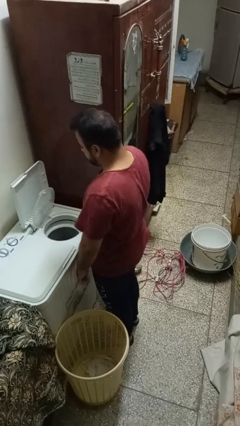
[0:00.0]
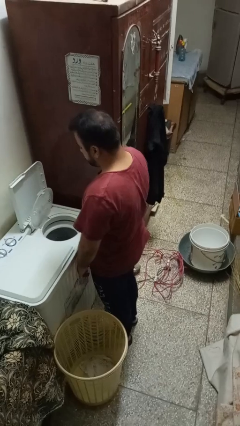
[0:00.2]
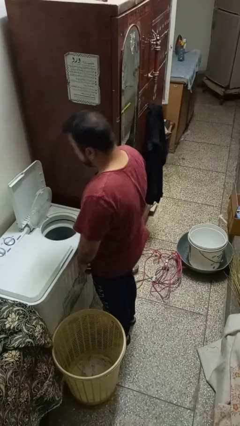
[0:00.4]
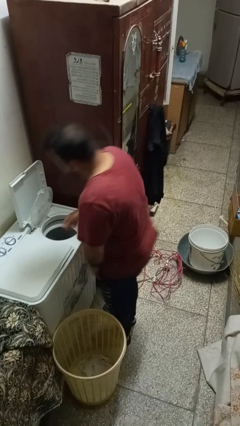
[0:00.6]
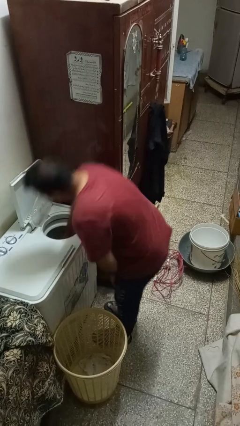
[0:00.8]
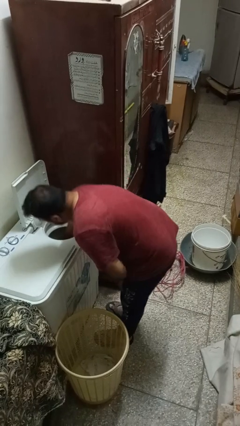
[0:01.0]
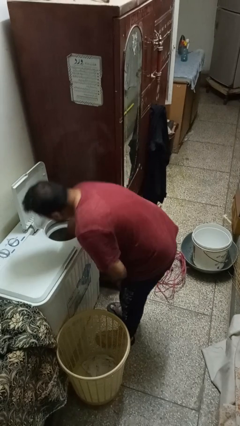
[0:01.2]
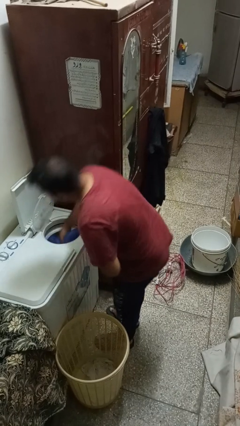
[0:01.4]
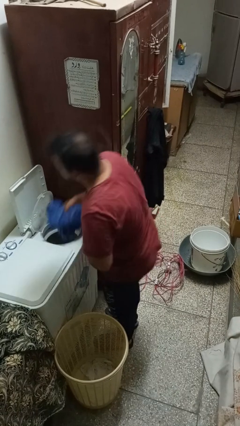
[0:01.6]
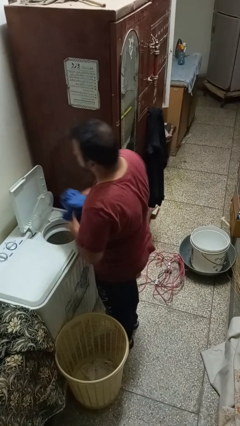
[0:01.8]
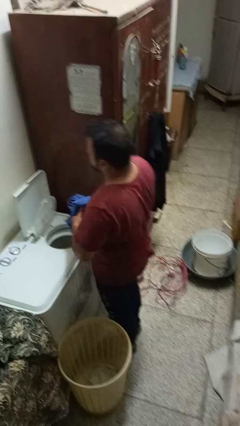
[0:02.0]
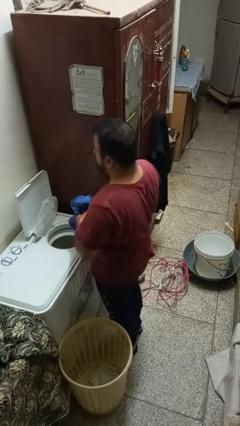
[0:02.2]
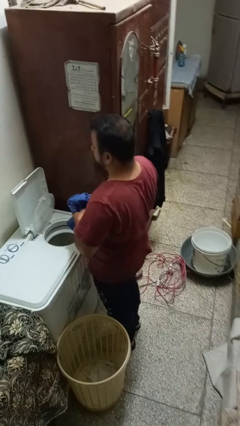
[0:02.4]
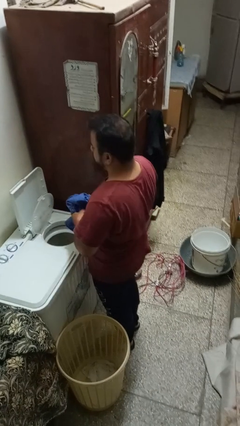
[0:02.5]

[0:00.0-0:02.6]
person unloads dryer

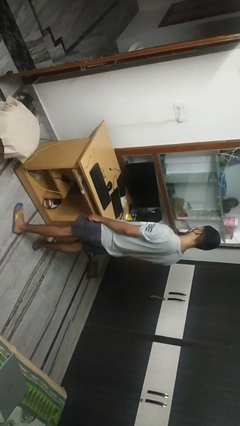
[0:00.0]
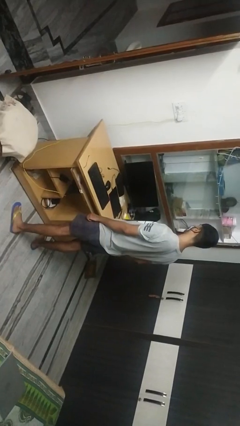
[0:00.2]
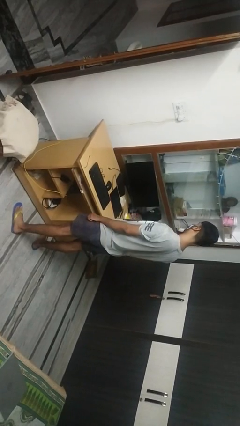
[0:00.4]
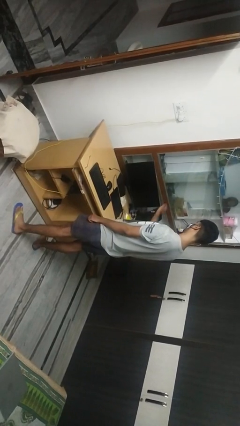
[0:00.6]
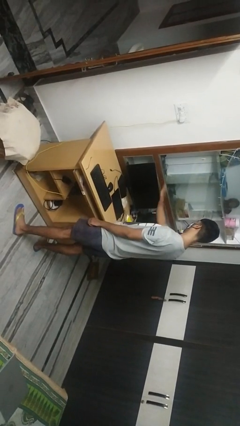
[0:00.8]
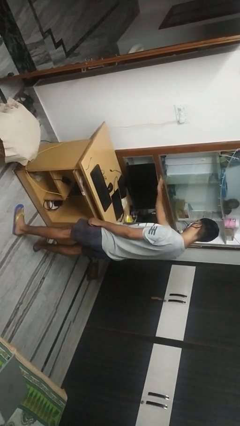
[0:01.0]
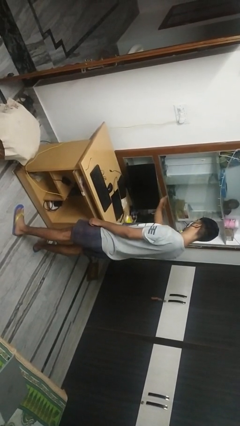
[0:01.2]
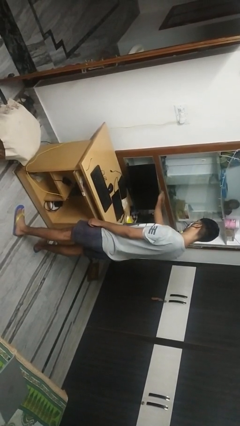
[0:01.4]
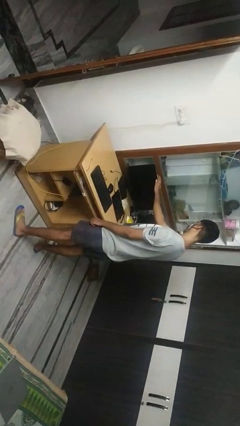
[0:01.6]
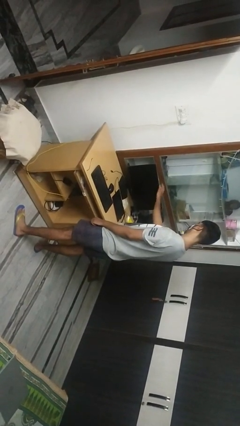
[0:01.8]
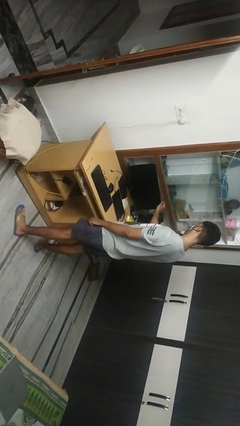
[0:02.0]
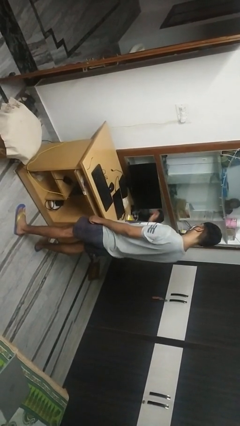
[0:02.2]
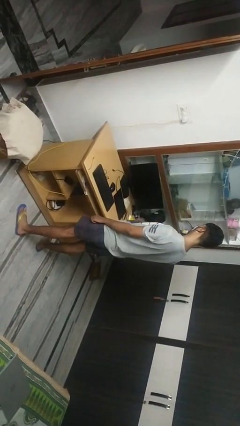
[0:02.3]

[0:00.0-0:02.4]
person waves hand over object

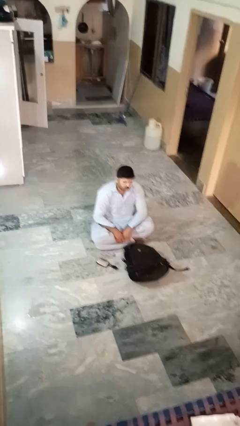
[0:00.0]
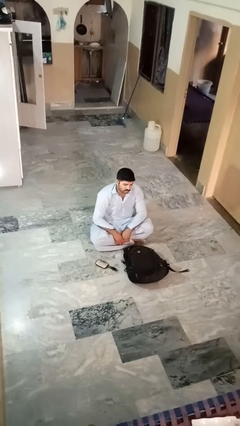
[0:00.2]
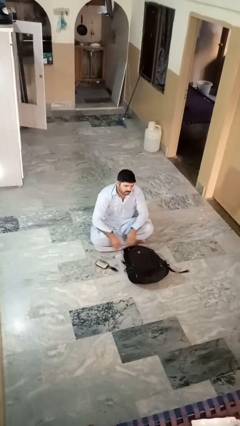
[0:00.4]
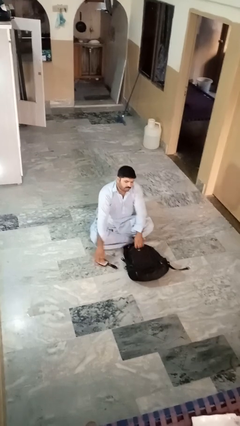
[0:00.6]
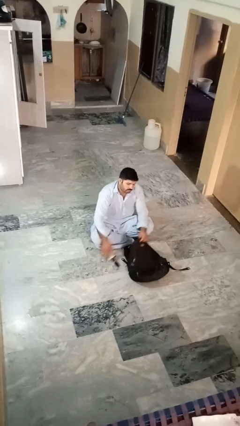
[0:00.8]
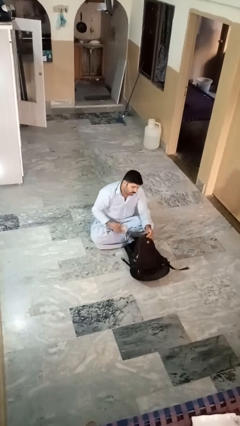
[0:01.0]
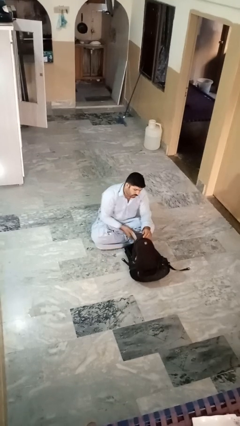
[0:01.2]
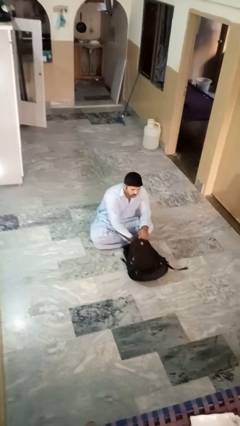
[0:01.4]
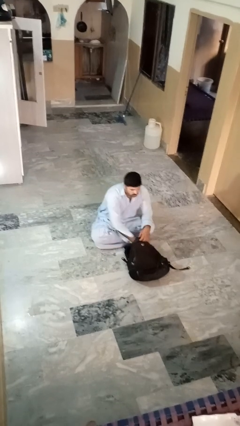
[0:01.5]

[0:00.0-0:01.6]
person puts object into bag

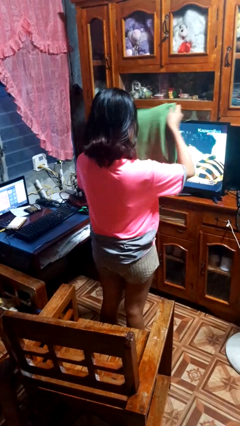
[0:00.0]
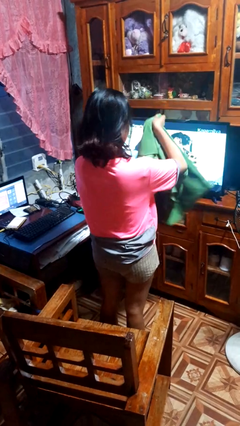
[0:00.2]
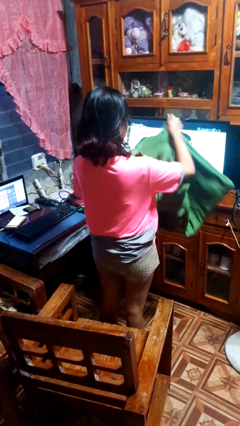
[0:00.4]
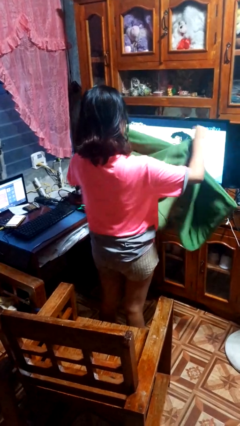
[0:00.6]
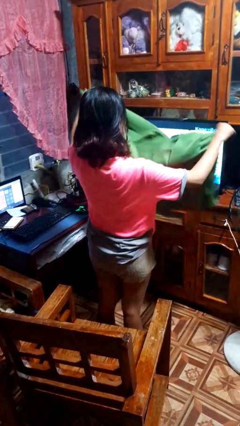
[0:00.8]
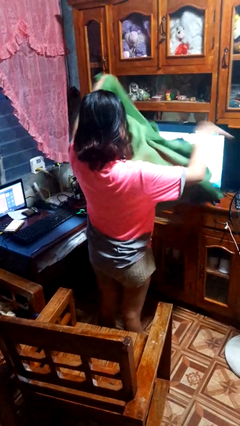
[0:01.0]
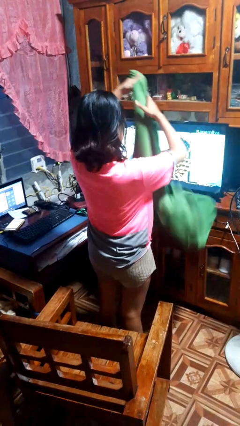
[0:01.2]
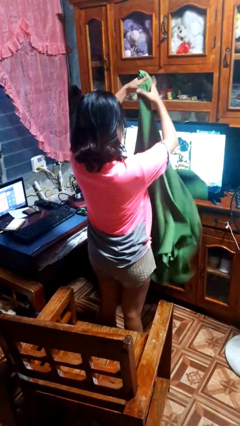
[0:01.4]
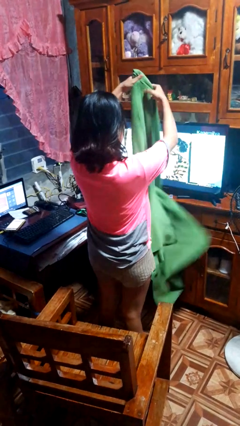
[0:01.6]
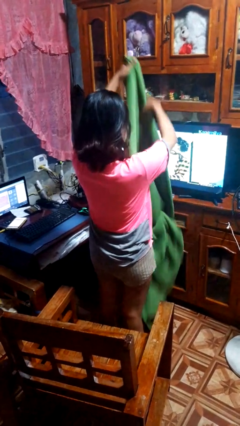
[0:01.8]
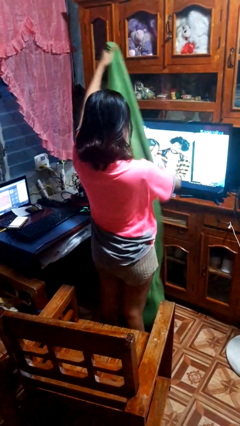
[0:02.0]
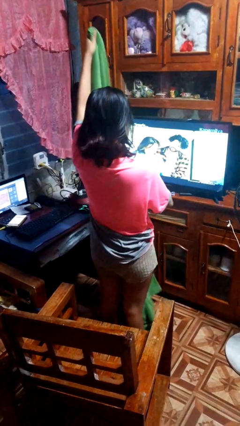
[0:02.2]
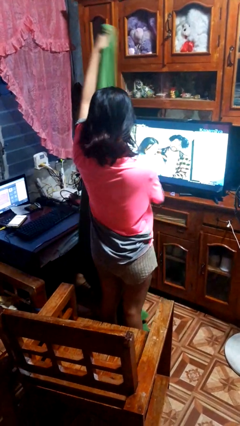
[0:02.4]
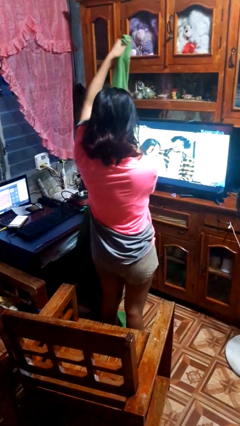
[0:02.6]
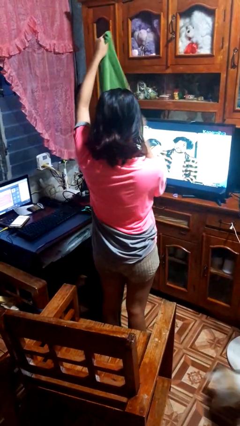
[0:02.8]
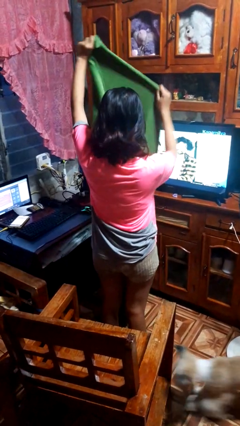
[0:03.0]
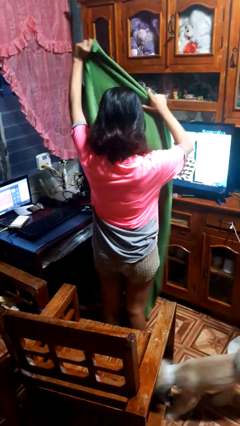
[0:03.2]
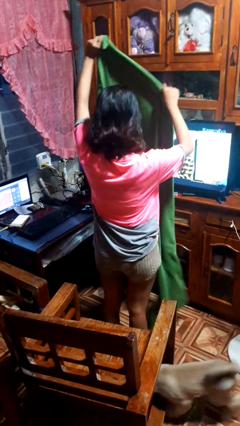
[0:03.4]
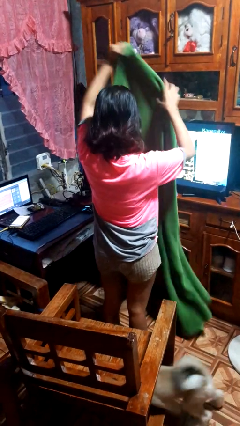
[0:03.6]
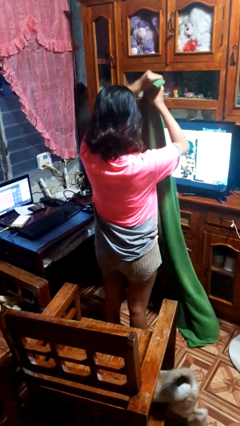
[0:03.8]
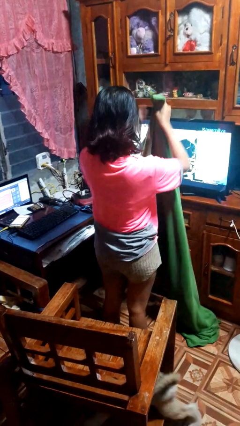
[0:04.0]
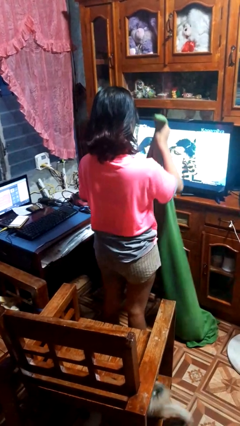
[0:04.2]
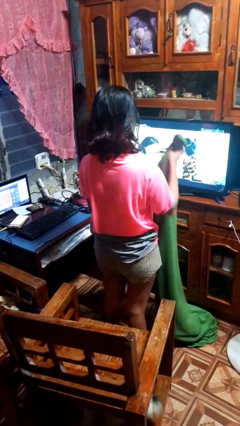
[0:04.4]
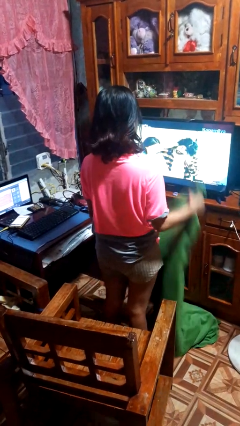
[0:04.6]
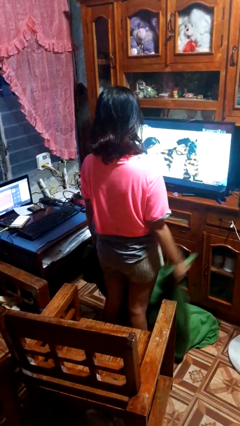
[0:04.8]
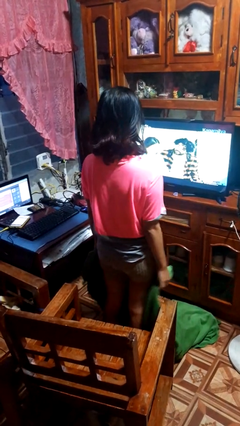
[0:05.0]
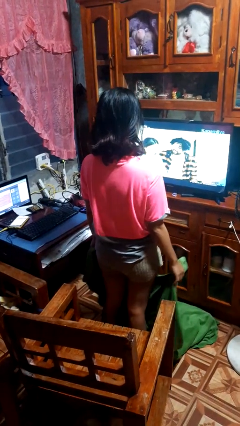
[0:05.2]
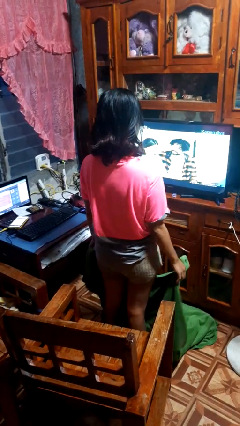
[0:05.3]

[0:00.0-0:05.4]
person unfolds blanket

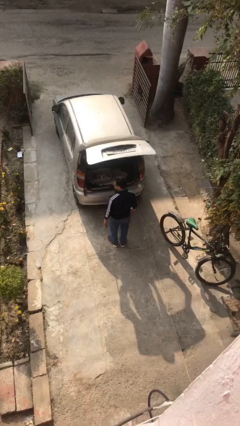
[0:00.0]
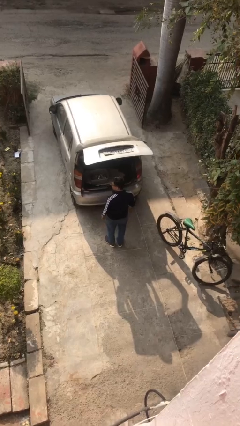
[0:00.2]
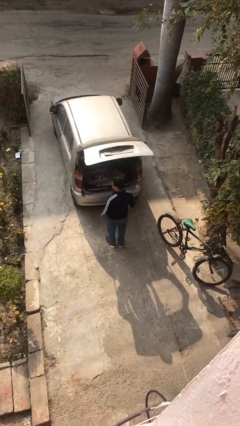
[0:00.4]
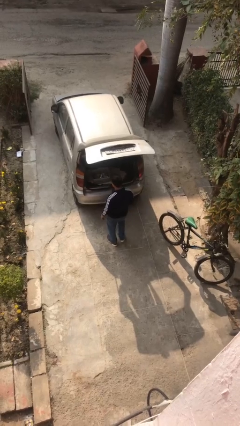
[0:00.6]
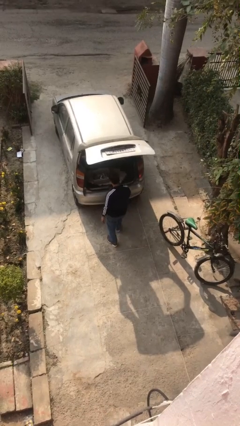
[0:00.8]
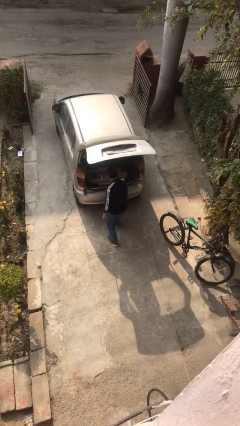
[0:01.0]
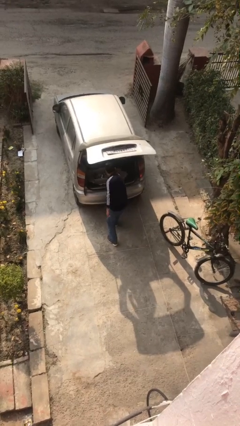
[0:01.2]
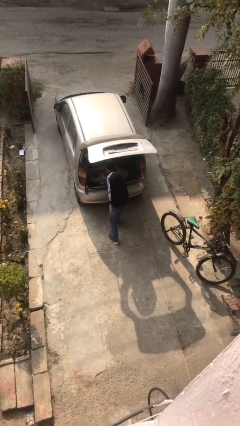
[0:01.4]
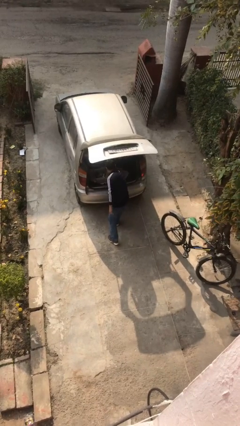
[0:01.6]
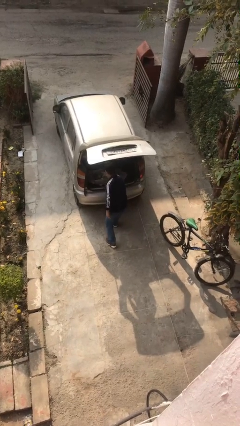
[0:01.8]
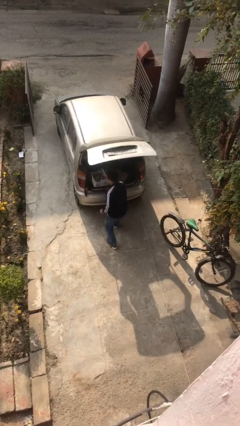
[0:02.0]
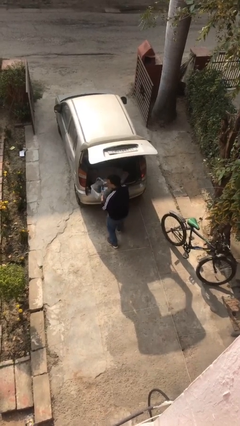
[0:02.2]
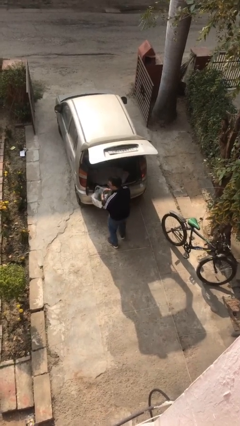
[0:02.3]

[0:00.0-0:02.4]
person unloads car

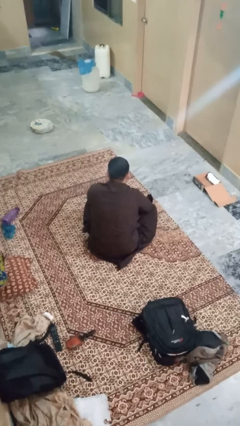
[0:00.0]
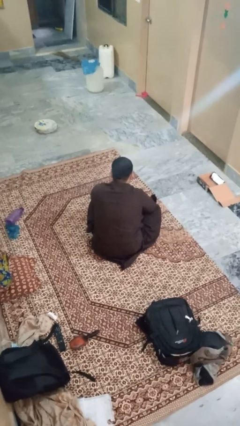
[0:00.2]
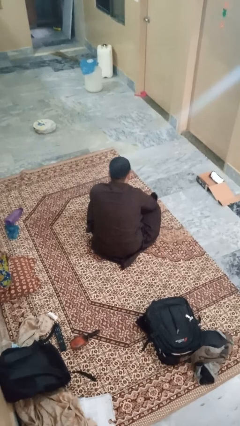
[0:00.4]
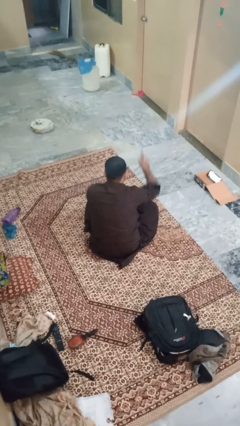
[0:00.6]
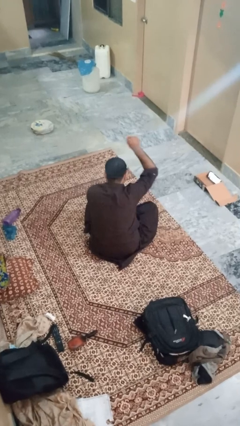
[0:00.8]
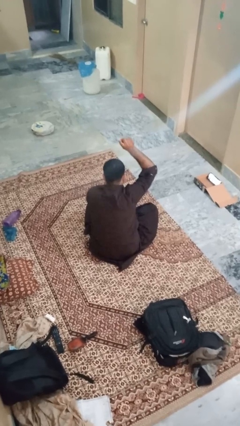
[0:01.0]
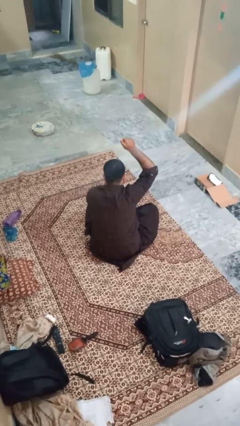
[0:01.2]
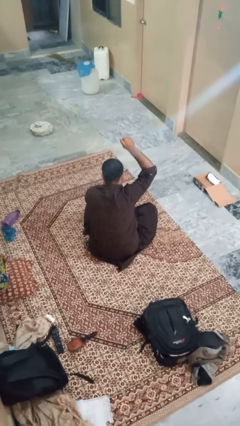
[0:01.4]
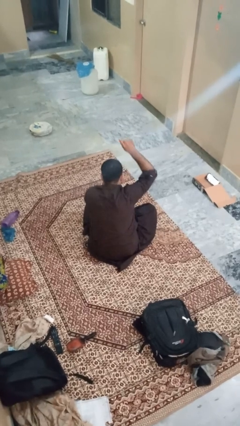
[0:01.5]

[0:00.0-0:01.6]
person gestures number one

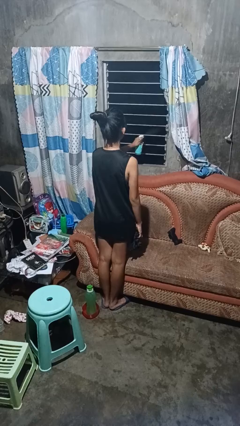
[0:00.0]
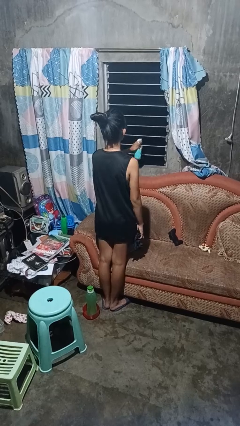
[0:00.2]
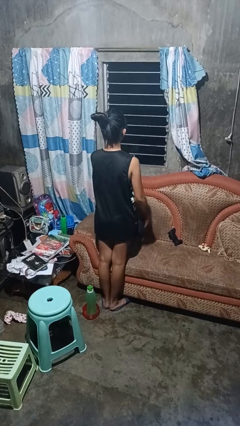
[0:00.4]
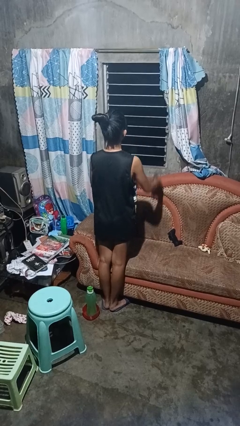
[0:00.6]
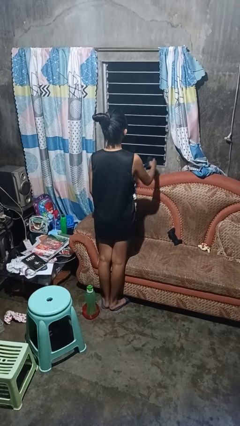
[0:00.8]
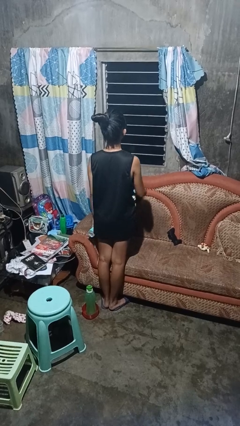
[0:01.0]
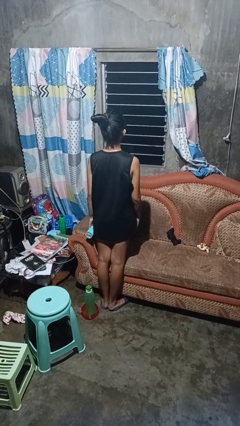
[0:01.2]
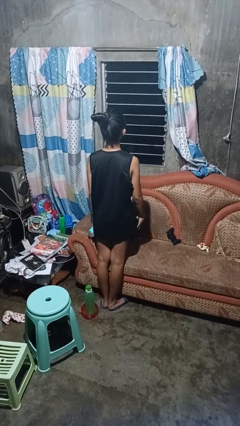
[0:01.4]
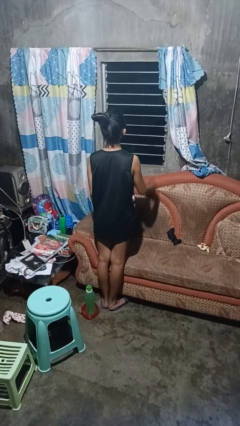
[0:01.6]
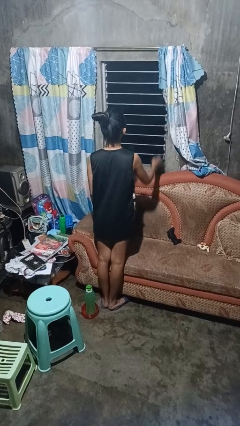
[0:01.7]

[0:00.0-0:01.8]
person sprays from bottle
